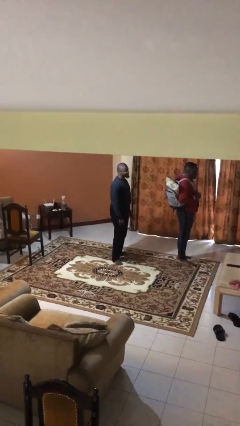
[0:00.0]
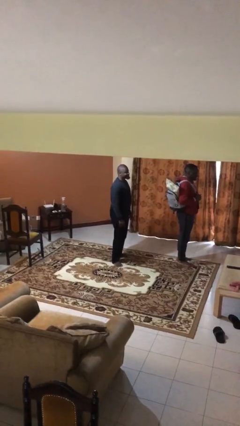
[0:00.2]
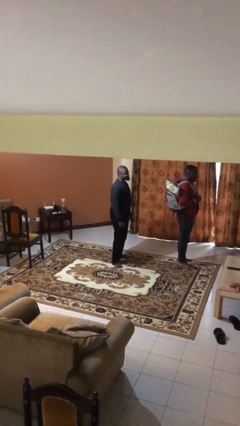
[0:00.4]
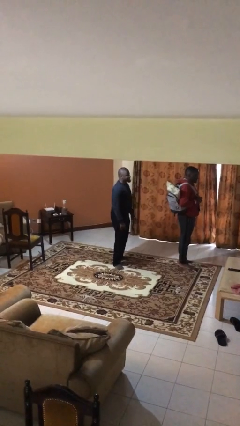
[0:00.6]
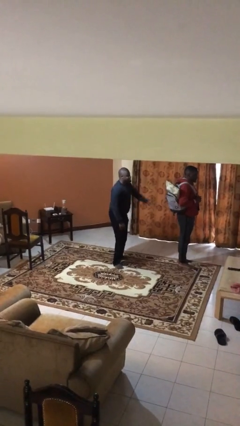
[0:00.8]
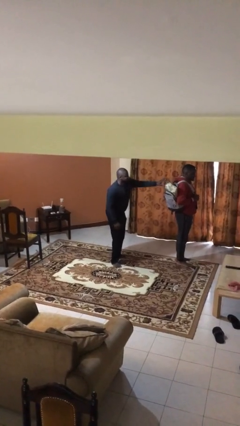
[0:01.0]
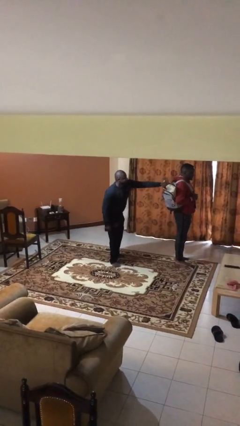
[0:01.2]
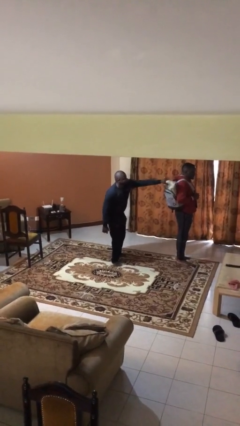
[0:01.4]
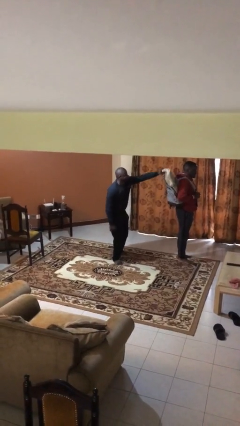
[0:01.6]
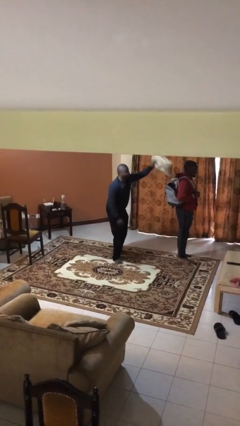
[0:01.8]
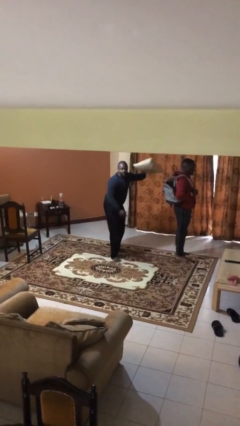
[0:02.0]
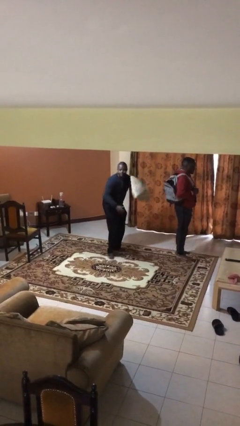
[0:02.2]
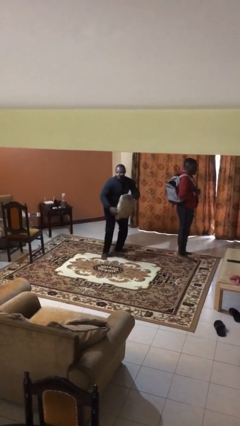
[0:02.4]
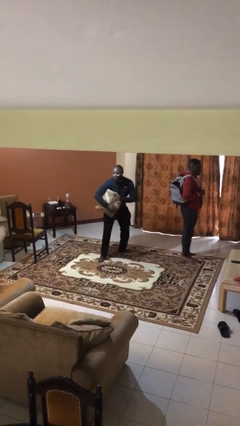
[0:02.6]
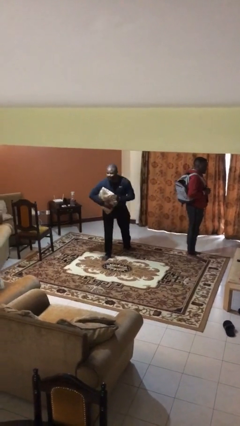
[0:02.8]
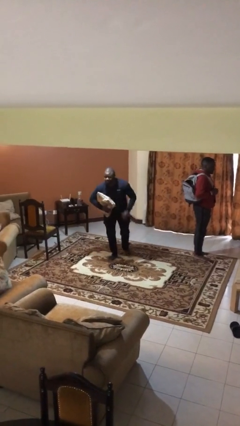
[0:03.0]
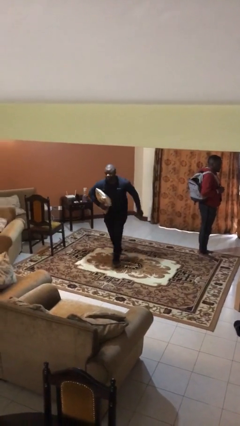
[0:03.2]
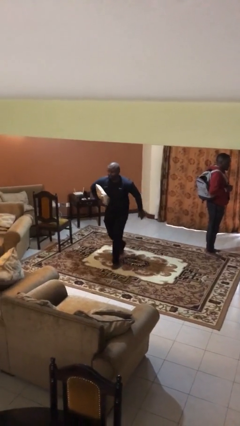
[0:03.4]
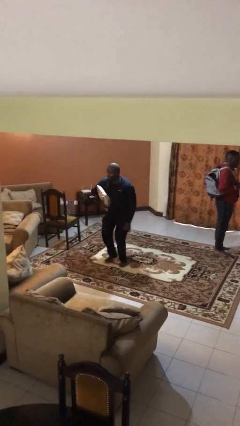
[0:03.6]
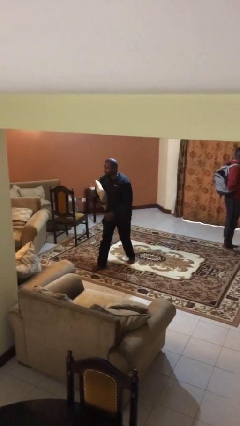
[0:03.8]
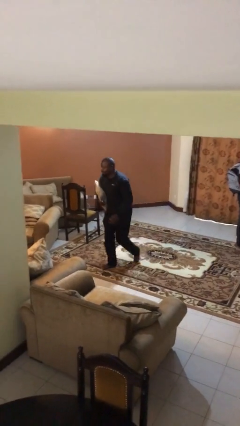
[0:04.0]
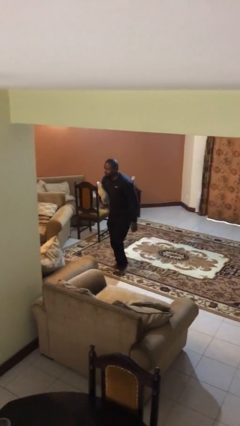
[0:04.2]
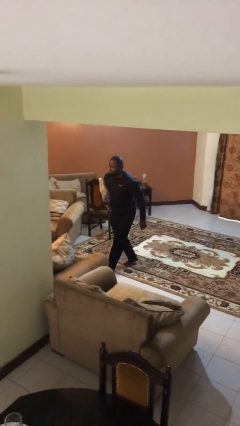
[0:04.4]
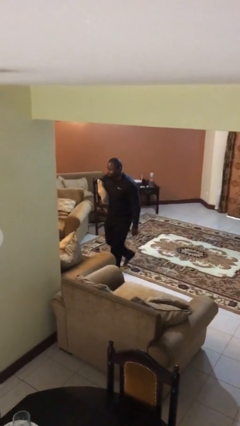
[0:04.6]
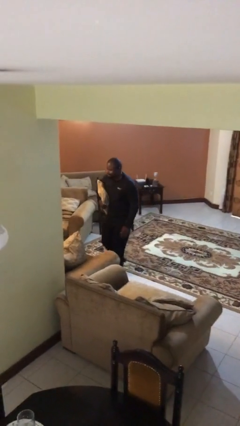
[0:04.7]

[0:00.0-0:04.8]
person steals object from person

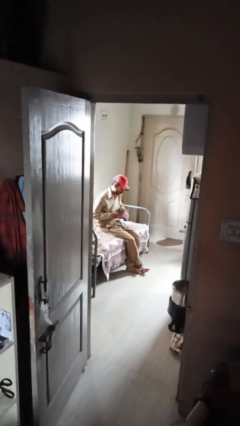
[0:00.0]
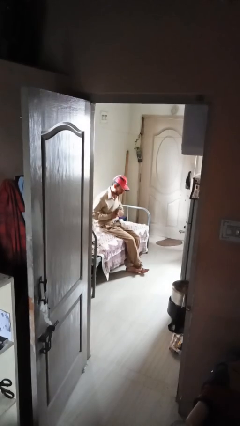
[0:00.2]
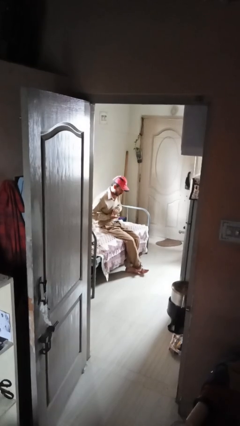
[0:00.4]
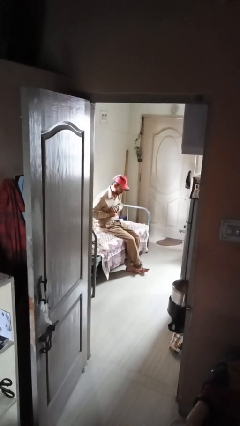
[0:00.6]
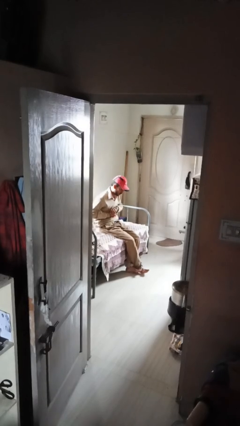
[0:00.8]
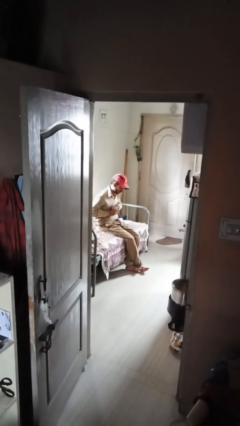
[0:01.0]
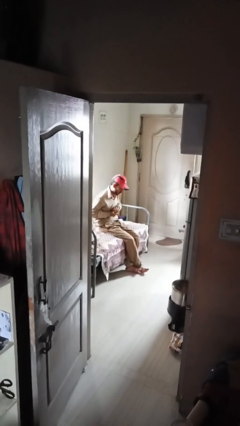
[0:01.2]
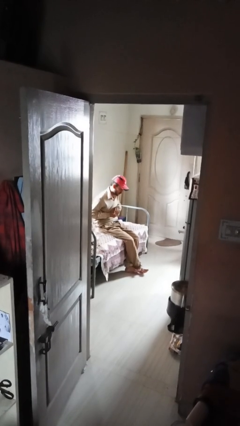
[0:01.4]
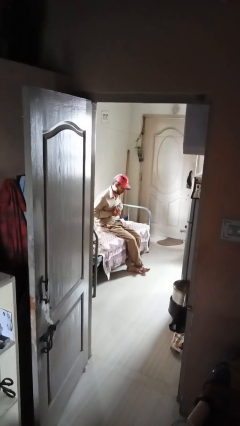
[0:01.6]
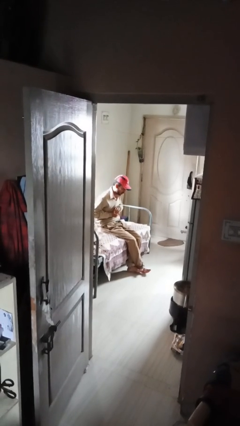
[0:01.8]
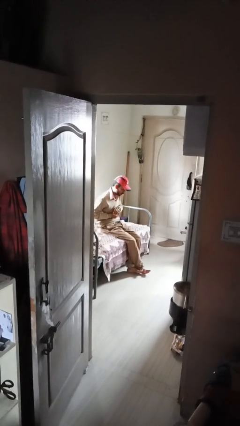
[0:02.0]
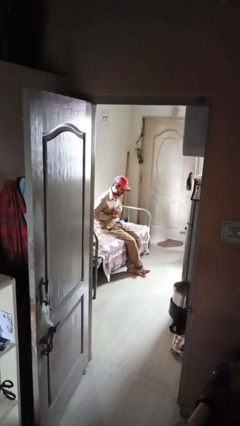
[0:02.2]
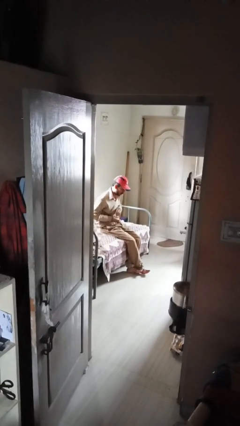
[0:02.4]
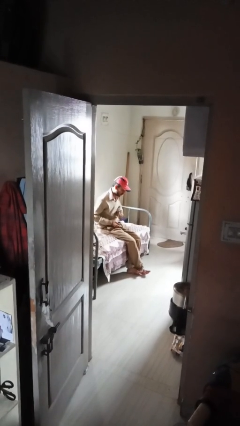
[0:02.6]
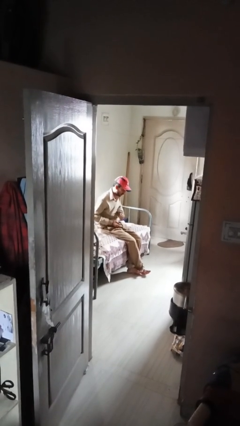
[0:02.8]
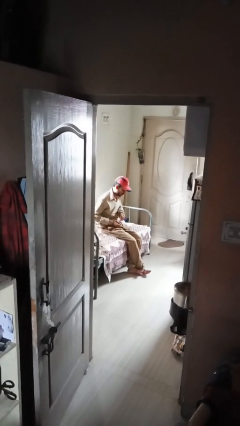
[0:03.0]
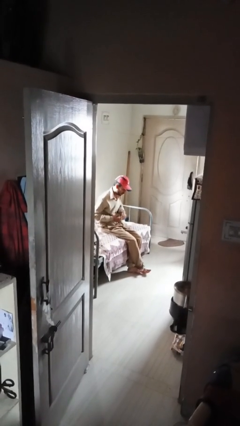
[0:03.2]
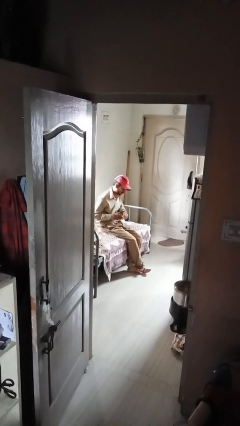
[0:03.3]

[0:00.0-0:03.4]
person puts on wristwatch

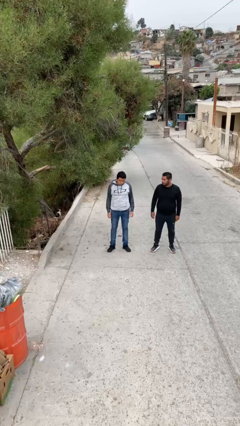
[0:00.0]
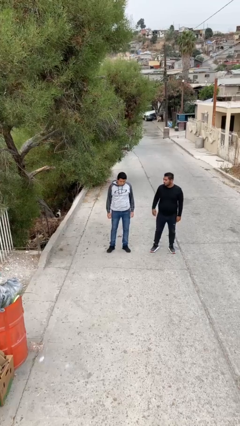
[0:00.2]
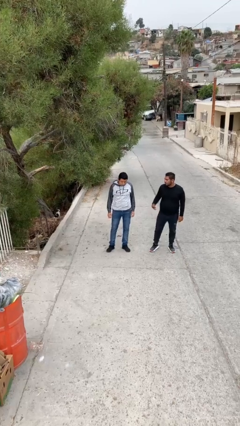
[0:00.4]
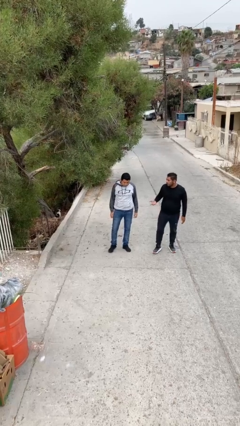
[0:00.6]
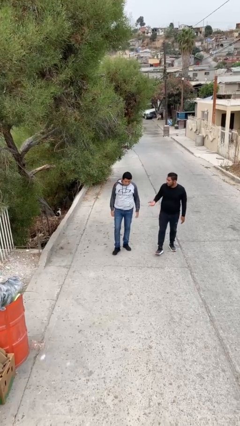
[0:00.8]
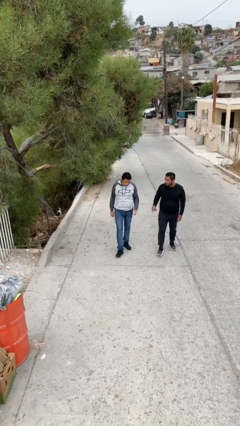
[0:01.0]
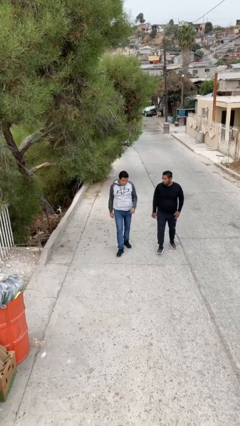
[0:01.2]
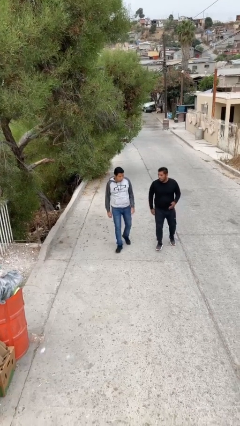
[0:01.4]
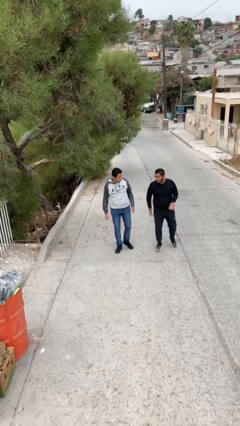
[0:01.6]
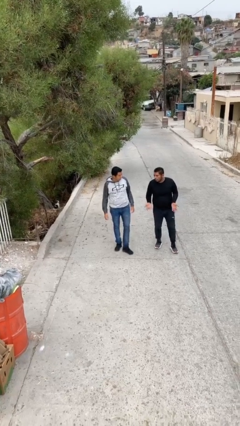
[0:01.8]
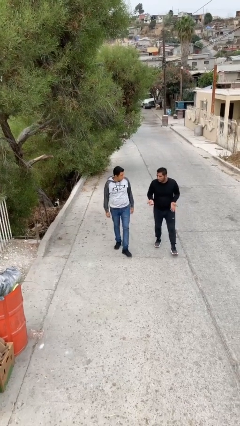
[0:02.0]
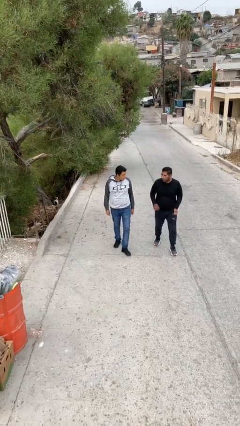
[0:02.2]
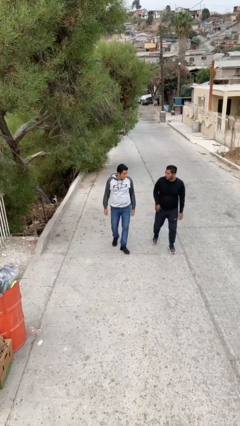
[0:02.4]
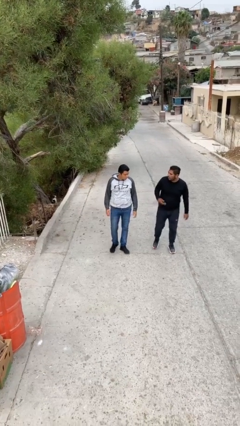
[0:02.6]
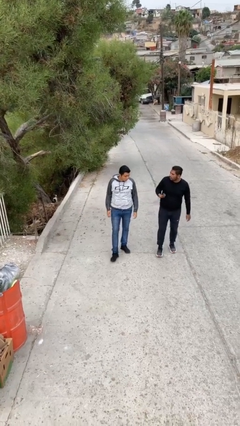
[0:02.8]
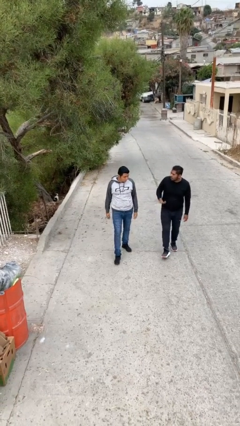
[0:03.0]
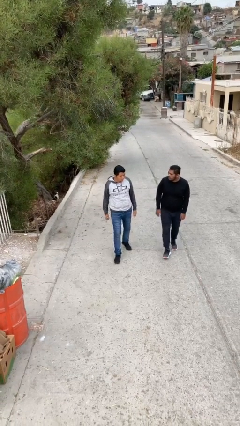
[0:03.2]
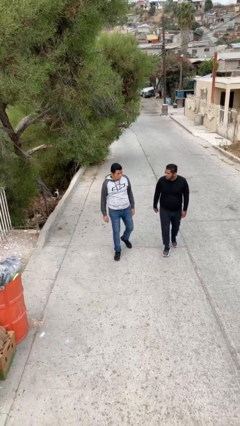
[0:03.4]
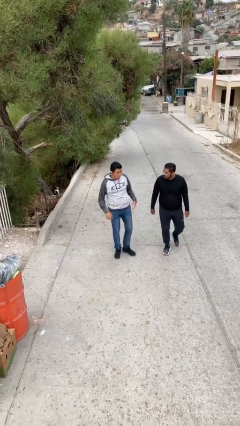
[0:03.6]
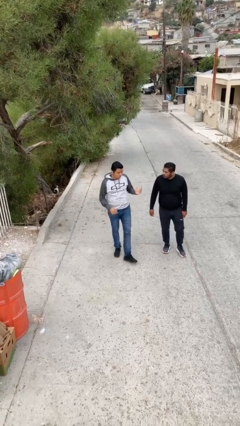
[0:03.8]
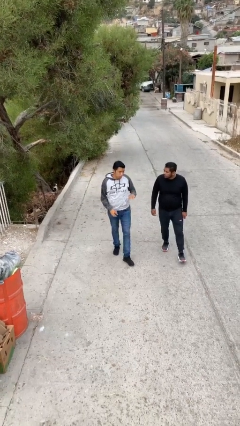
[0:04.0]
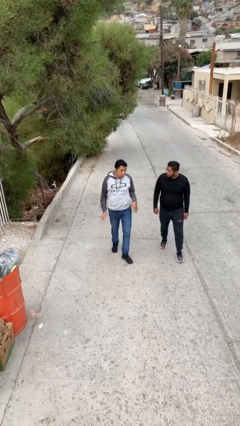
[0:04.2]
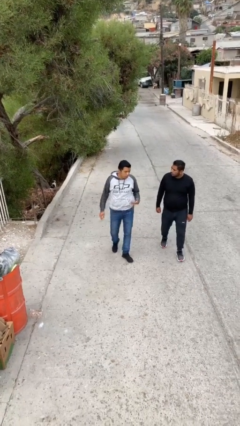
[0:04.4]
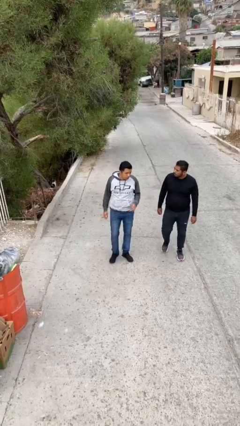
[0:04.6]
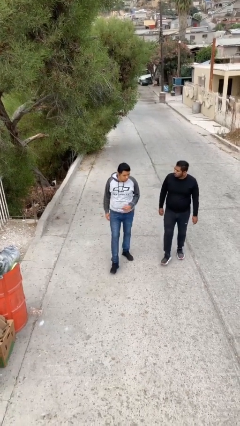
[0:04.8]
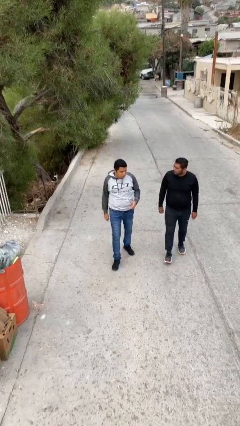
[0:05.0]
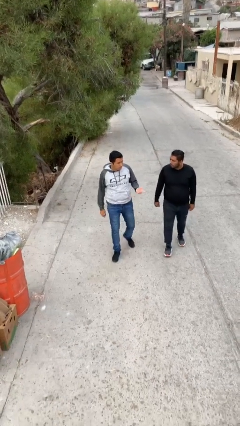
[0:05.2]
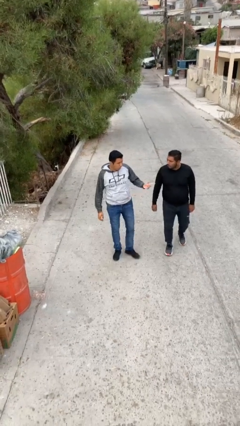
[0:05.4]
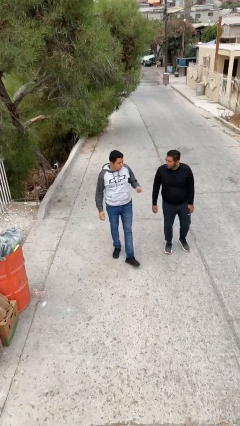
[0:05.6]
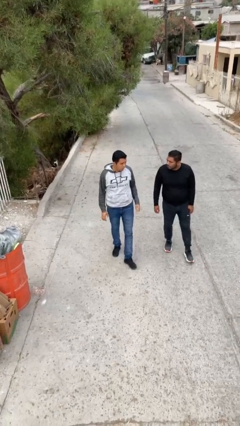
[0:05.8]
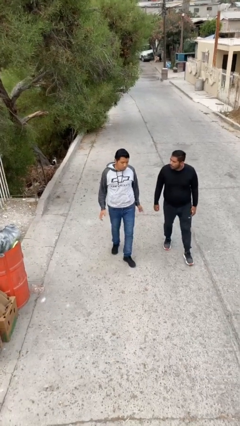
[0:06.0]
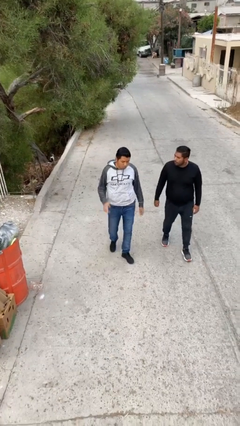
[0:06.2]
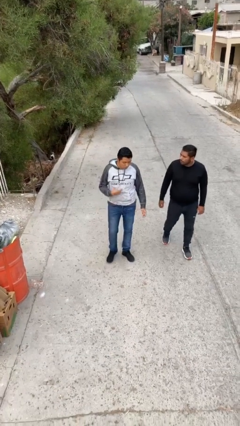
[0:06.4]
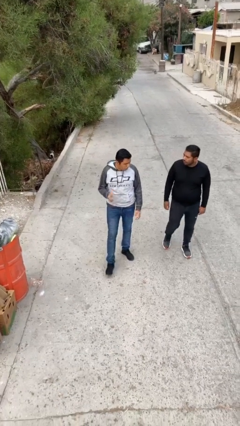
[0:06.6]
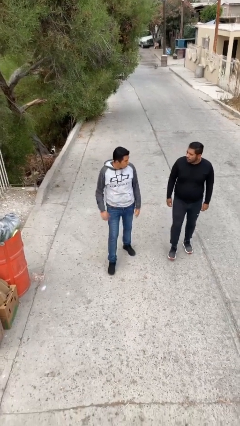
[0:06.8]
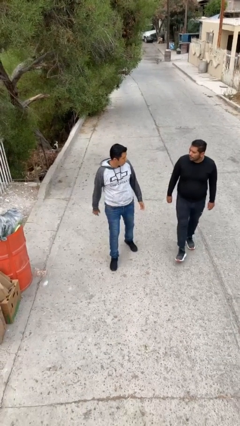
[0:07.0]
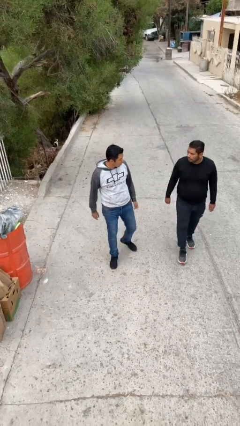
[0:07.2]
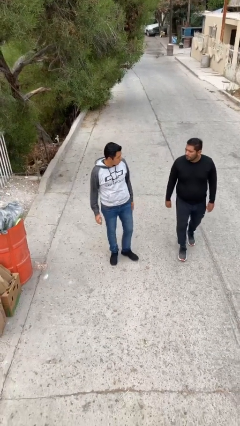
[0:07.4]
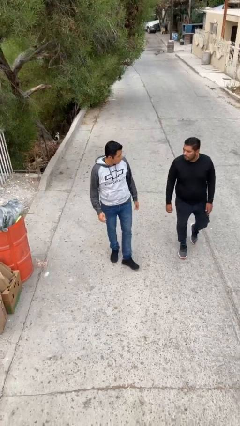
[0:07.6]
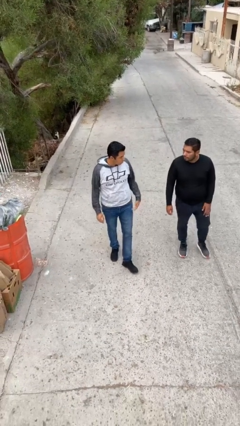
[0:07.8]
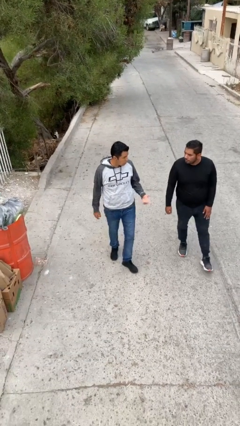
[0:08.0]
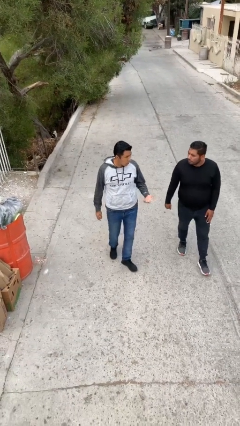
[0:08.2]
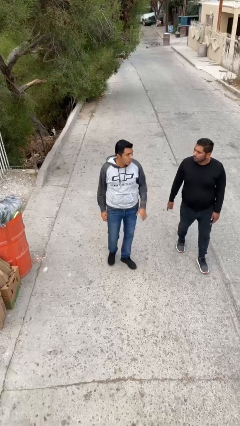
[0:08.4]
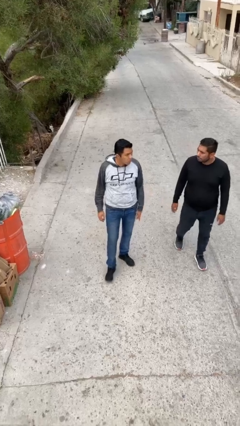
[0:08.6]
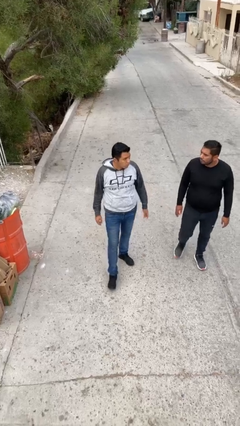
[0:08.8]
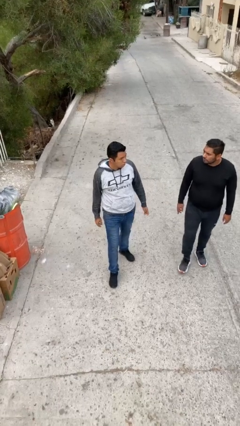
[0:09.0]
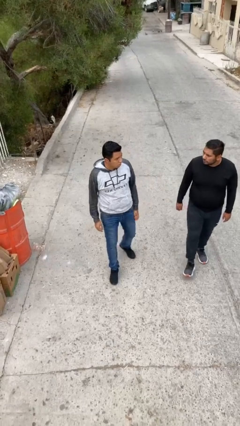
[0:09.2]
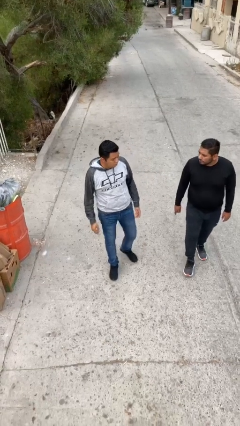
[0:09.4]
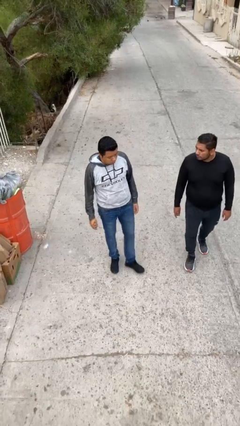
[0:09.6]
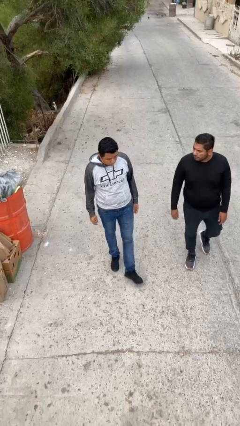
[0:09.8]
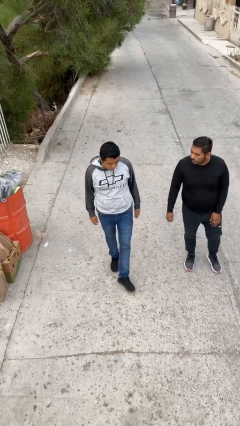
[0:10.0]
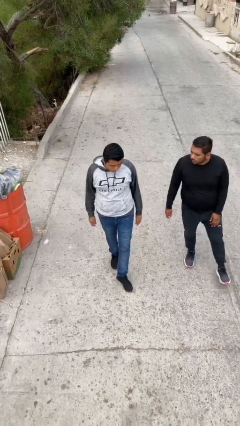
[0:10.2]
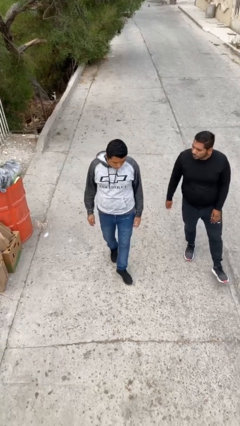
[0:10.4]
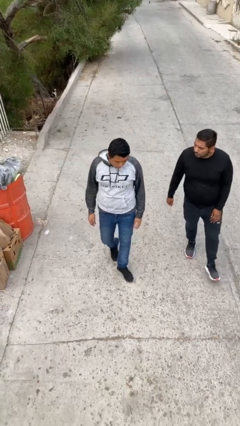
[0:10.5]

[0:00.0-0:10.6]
person talks to person
